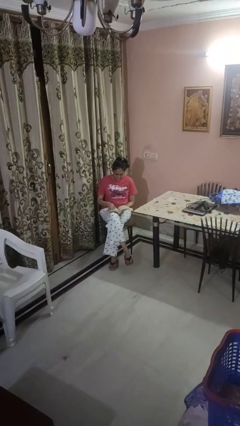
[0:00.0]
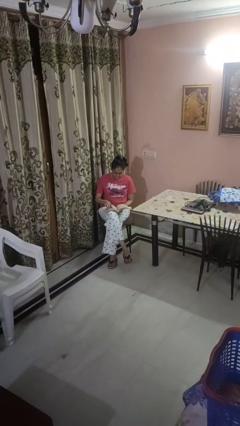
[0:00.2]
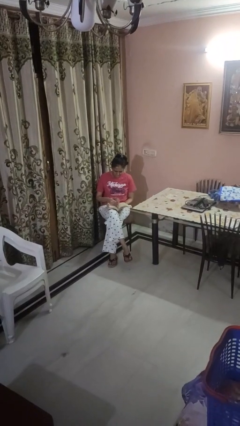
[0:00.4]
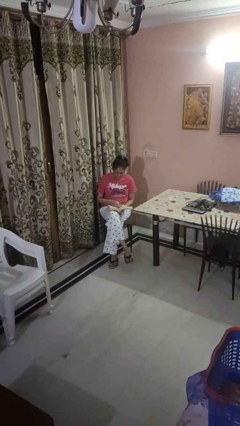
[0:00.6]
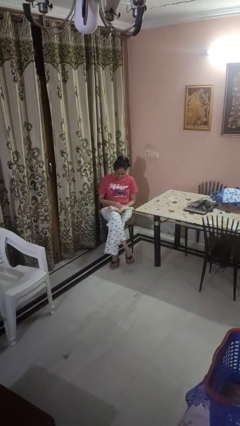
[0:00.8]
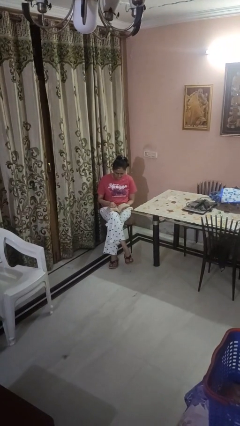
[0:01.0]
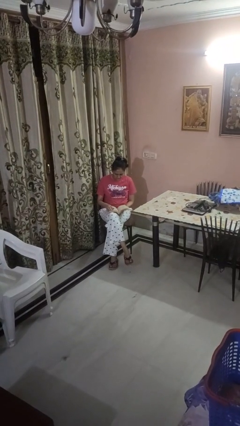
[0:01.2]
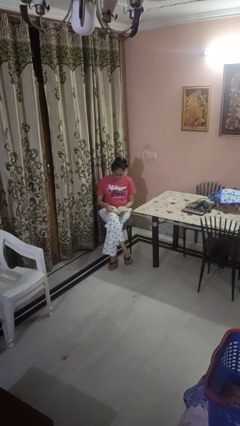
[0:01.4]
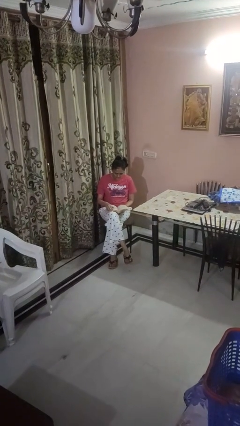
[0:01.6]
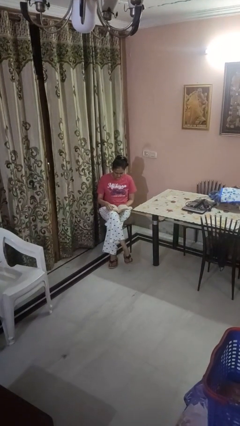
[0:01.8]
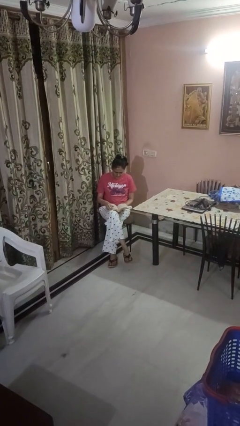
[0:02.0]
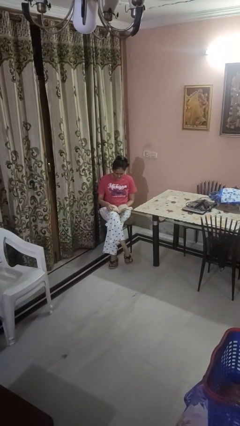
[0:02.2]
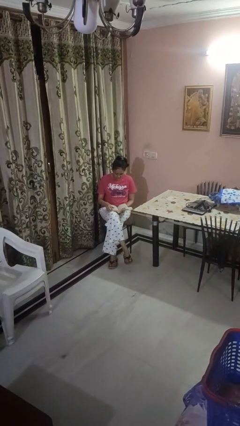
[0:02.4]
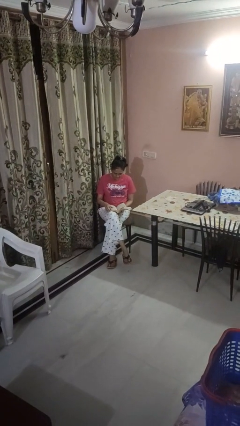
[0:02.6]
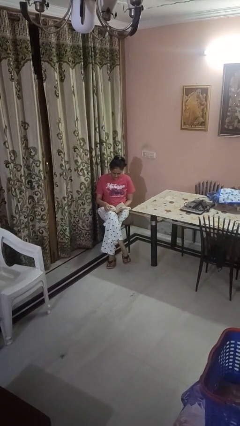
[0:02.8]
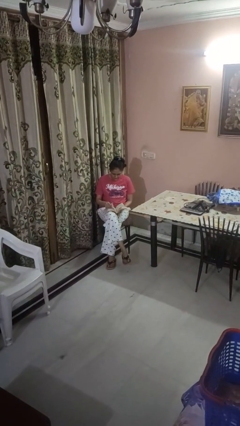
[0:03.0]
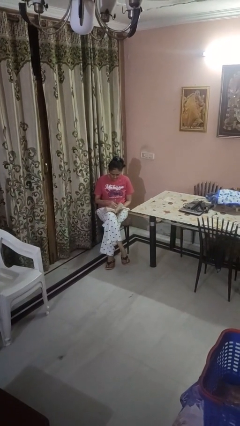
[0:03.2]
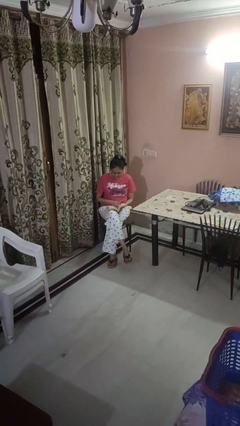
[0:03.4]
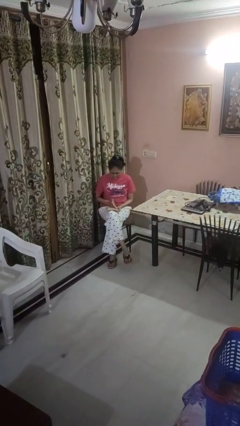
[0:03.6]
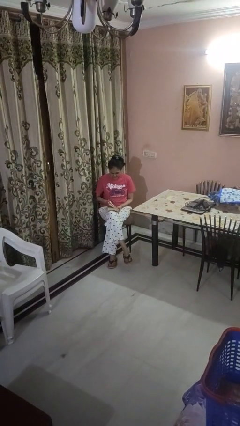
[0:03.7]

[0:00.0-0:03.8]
person reads book

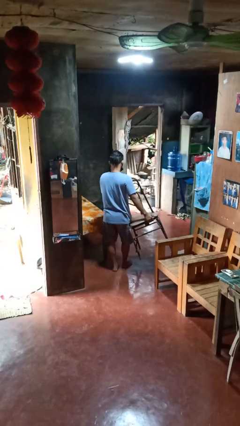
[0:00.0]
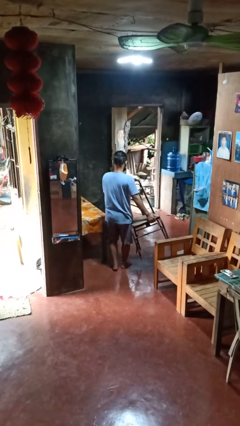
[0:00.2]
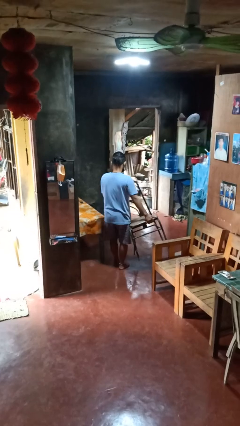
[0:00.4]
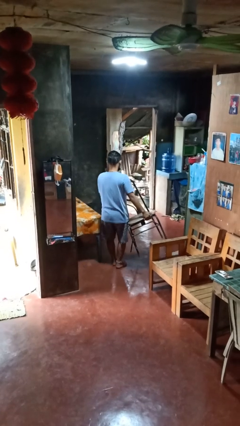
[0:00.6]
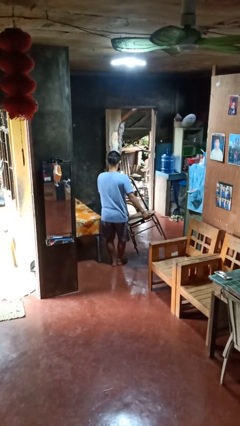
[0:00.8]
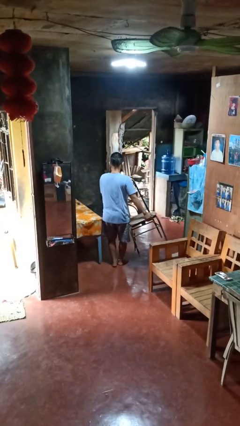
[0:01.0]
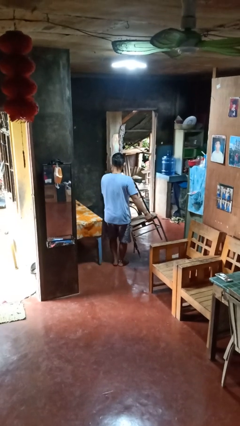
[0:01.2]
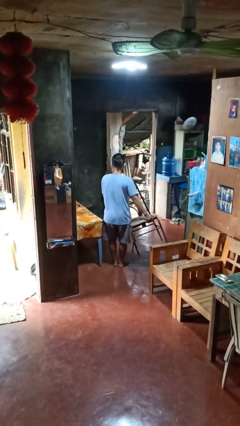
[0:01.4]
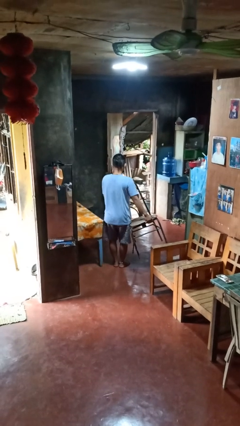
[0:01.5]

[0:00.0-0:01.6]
person carries furniture

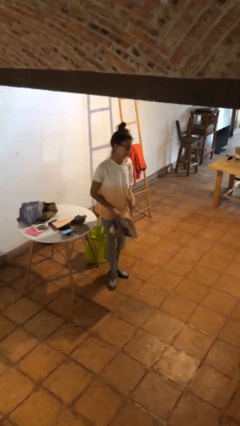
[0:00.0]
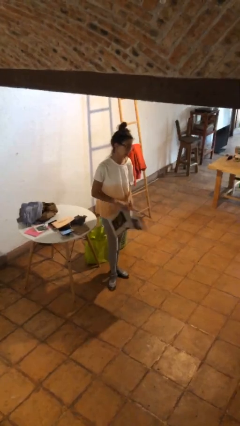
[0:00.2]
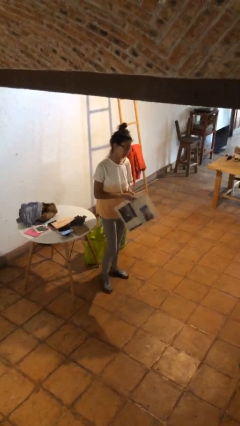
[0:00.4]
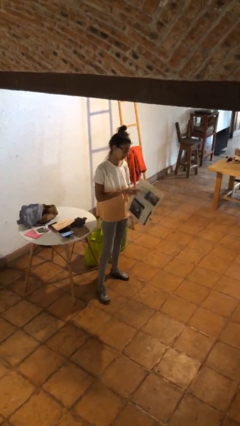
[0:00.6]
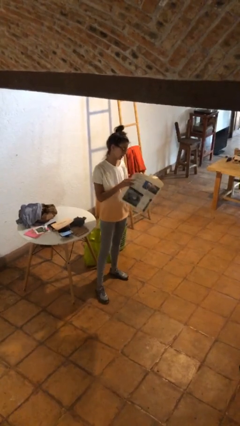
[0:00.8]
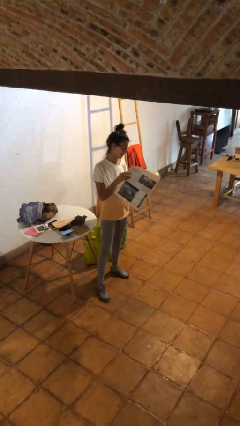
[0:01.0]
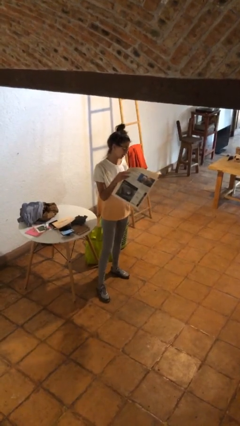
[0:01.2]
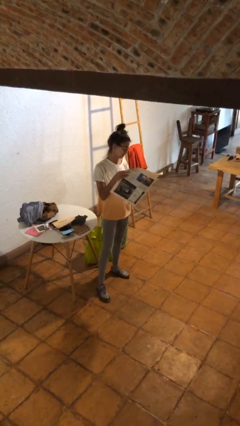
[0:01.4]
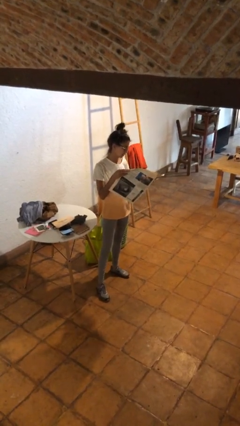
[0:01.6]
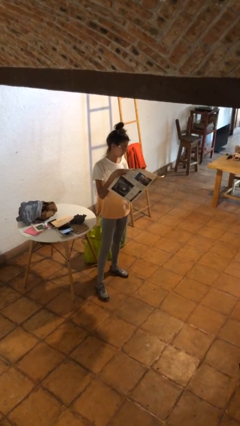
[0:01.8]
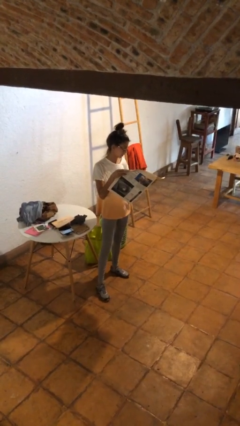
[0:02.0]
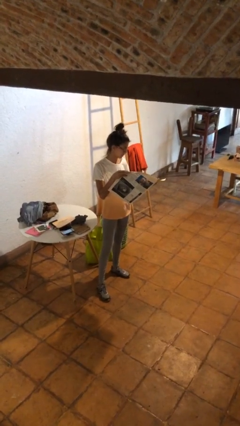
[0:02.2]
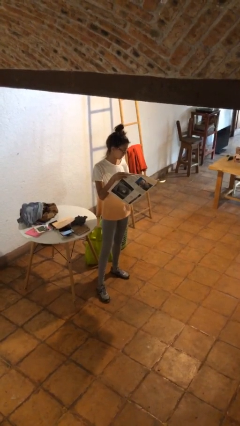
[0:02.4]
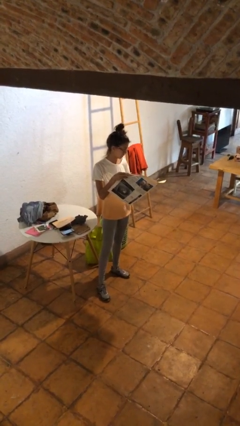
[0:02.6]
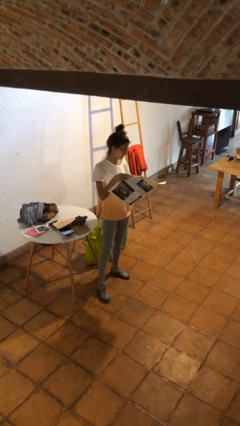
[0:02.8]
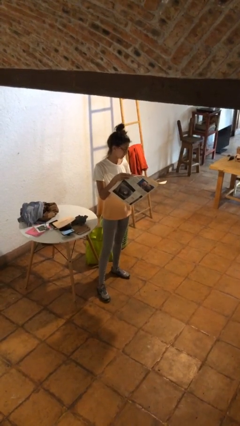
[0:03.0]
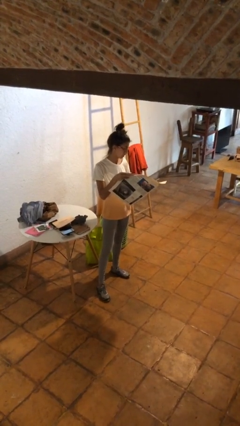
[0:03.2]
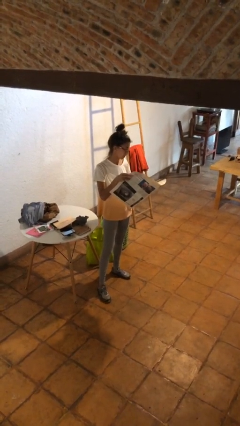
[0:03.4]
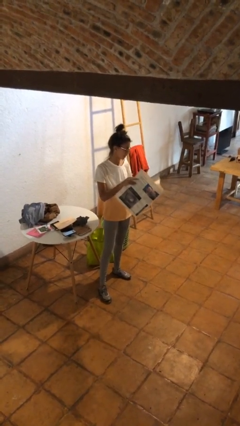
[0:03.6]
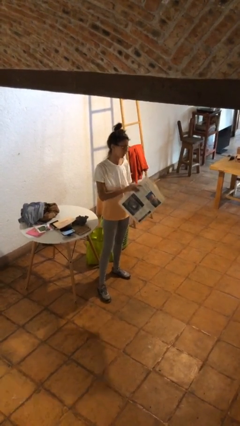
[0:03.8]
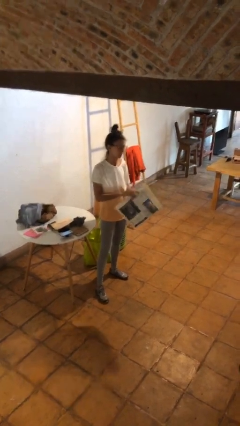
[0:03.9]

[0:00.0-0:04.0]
person reads newspaper

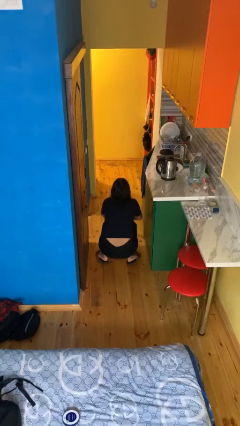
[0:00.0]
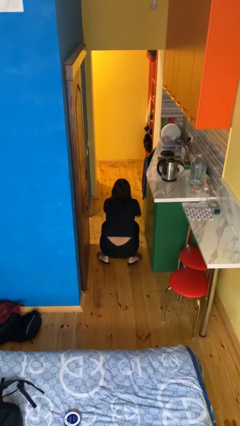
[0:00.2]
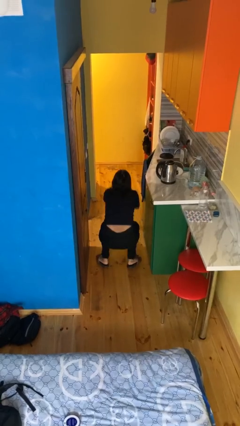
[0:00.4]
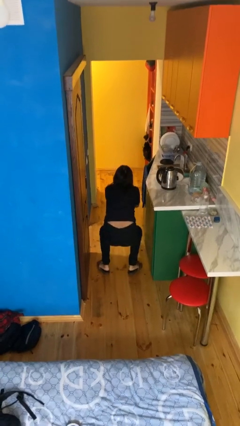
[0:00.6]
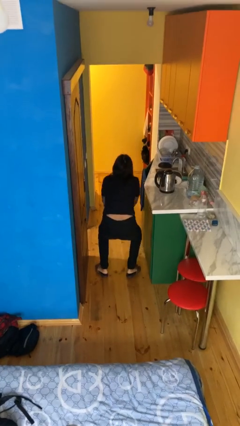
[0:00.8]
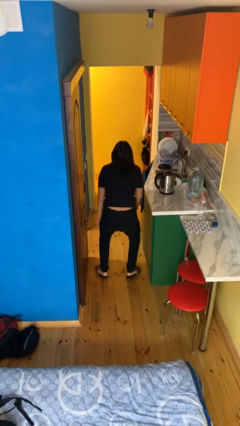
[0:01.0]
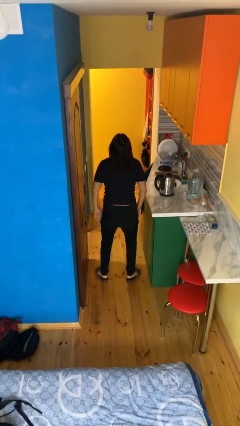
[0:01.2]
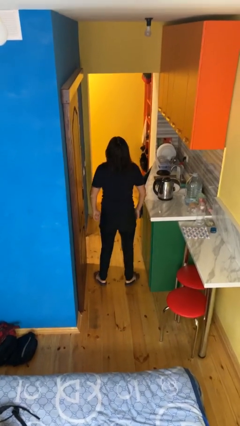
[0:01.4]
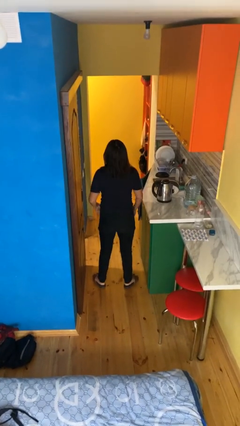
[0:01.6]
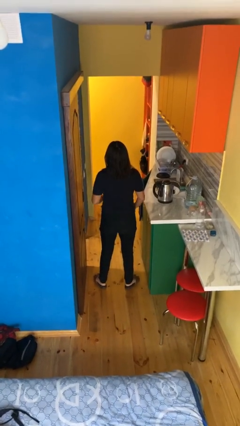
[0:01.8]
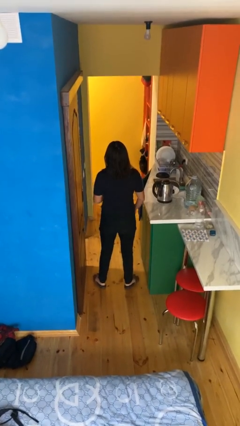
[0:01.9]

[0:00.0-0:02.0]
person stands up

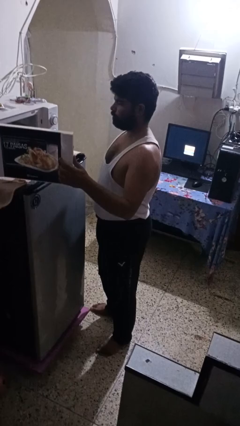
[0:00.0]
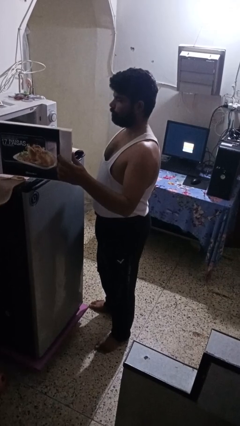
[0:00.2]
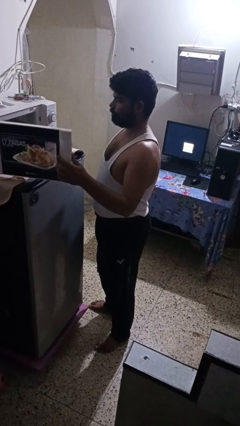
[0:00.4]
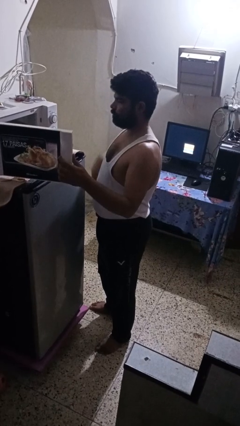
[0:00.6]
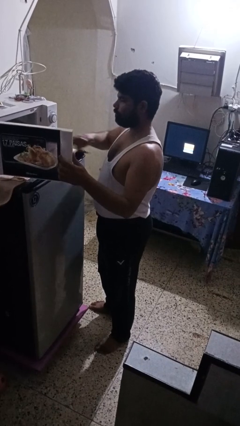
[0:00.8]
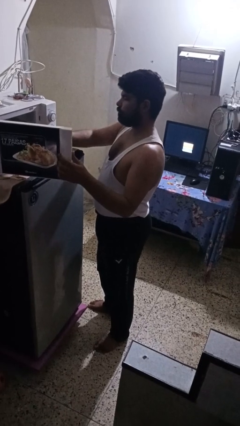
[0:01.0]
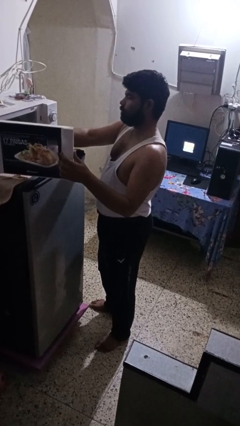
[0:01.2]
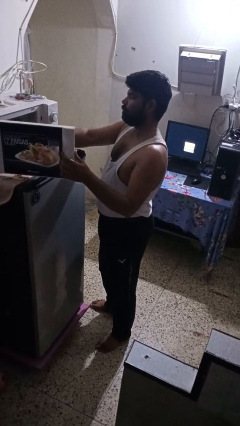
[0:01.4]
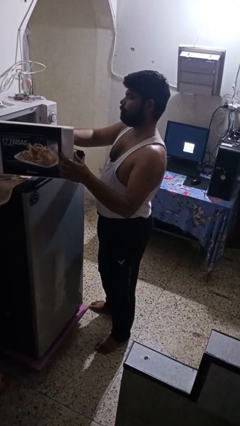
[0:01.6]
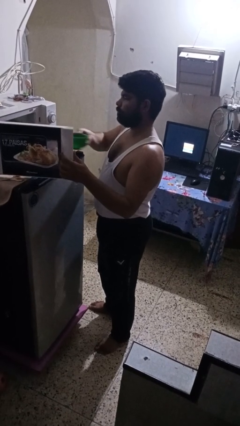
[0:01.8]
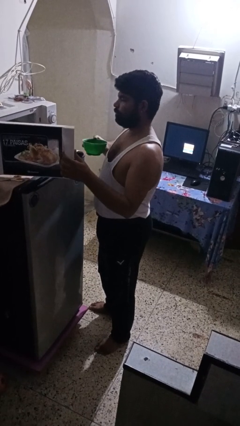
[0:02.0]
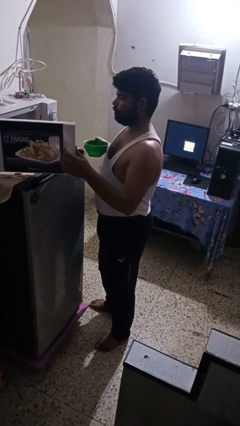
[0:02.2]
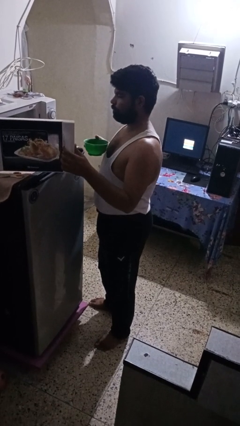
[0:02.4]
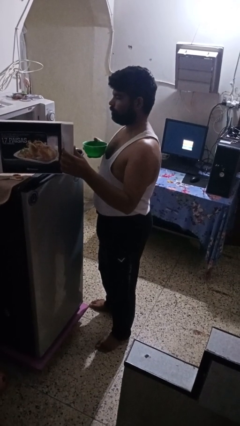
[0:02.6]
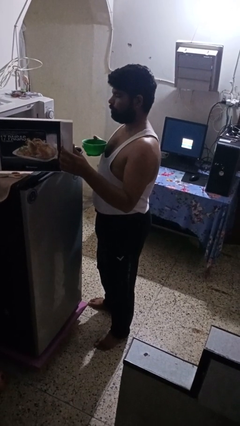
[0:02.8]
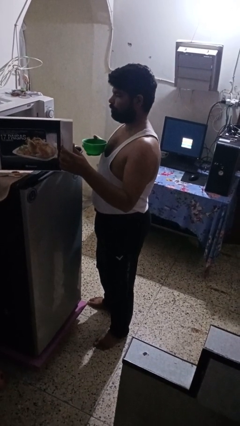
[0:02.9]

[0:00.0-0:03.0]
person takes object from microwave

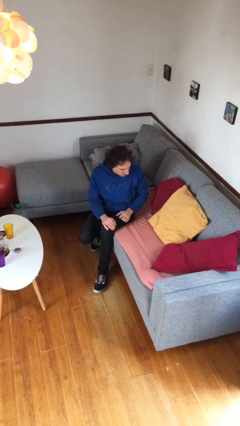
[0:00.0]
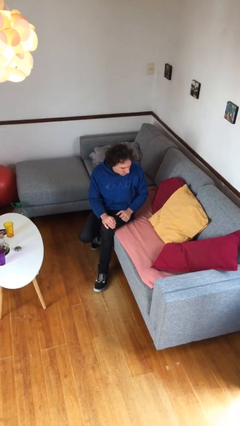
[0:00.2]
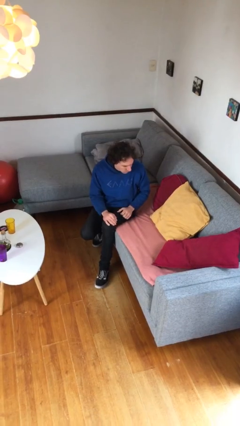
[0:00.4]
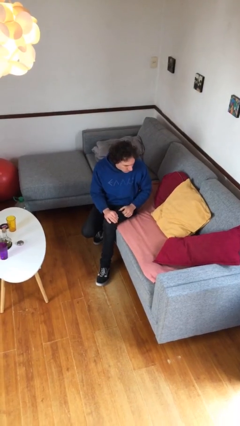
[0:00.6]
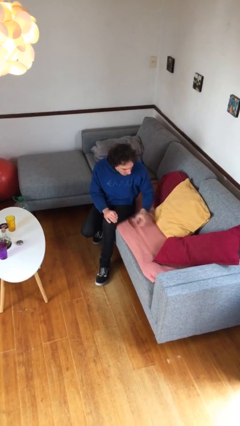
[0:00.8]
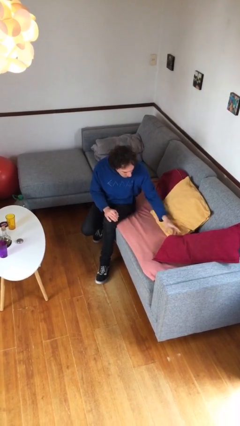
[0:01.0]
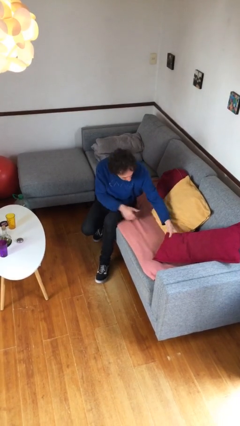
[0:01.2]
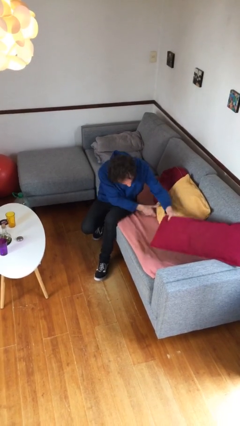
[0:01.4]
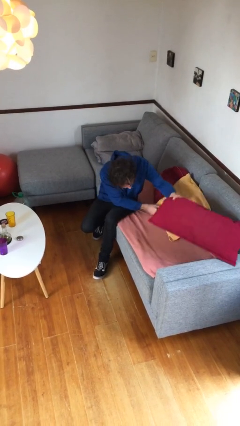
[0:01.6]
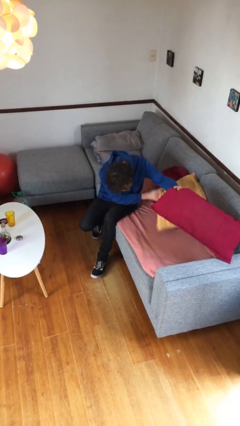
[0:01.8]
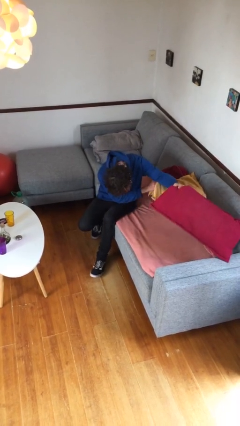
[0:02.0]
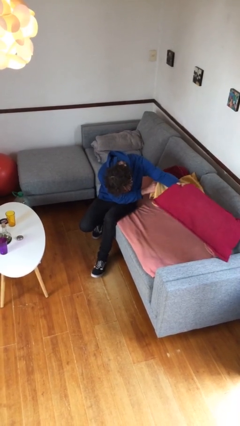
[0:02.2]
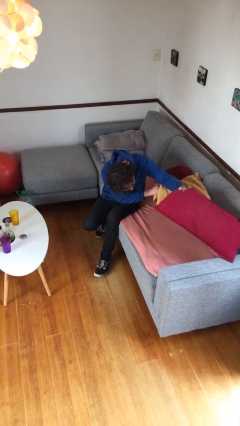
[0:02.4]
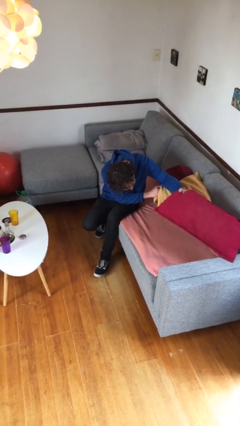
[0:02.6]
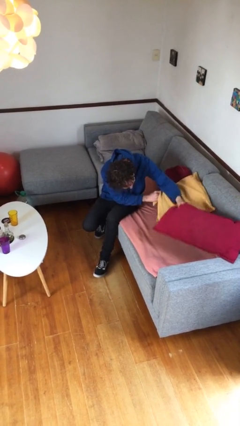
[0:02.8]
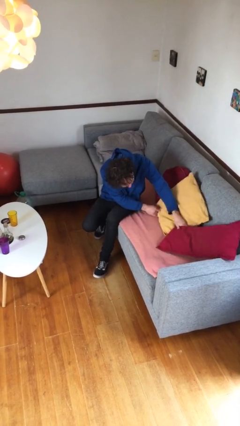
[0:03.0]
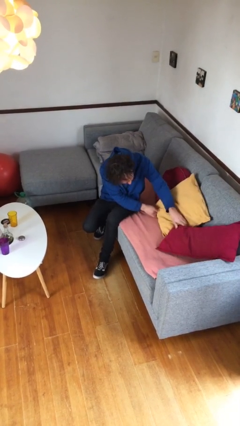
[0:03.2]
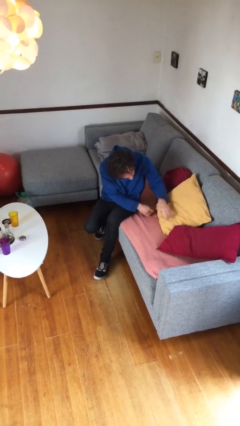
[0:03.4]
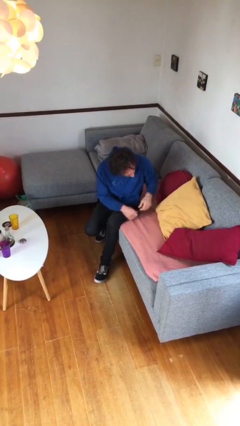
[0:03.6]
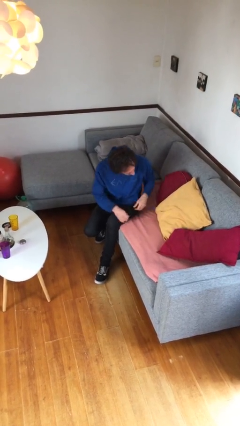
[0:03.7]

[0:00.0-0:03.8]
person searches in couch
